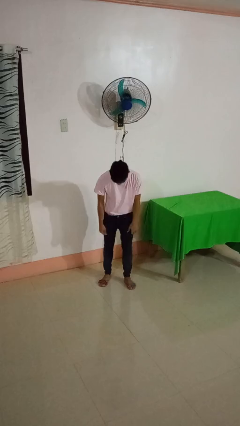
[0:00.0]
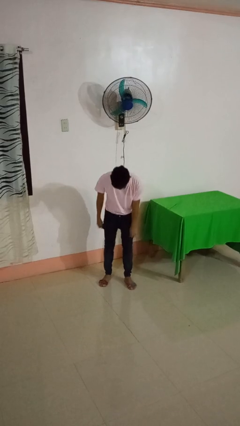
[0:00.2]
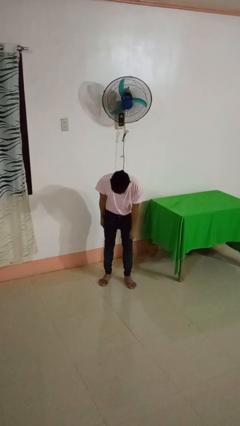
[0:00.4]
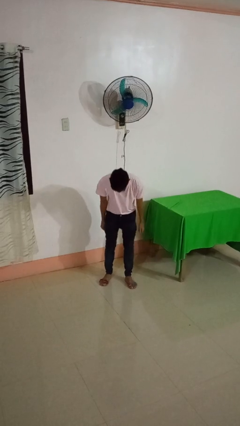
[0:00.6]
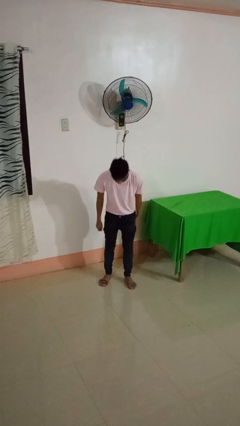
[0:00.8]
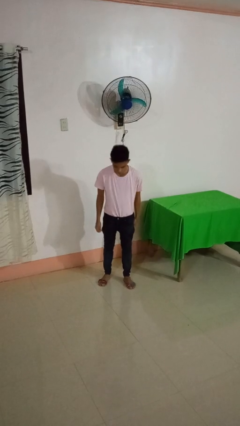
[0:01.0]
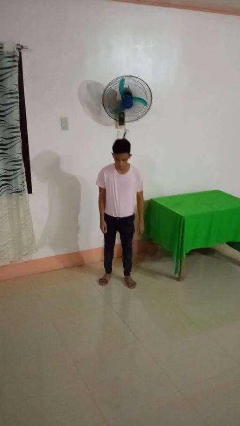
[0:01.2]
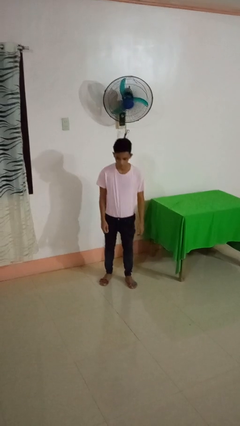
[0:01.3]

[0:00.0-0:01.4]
person hikes up pants

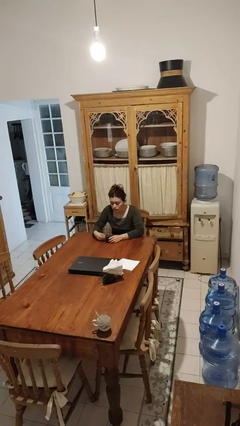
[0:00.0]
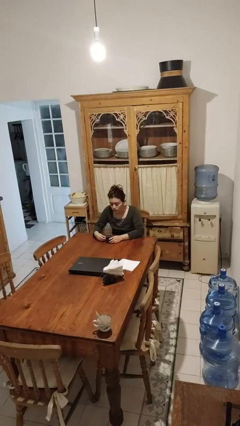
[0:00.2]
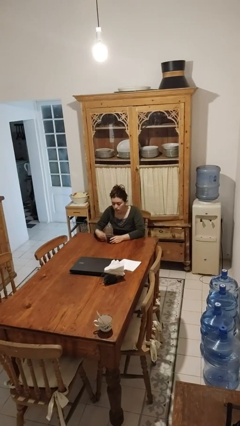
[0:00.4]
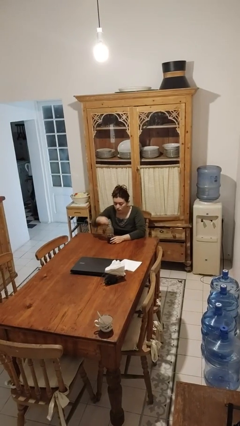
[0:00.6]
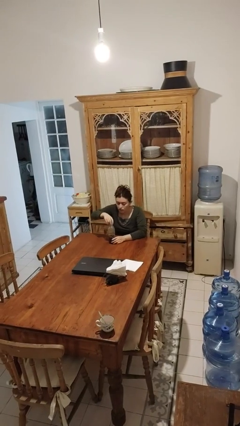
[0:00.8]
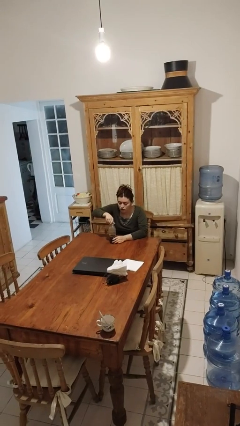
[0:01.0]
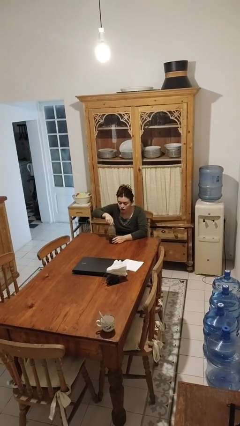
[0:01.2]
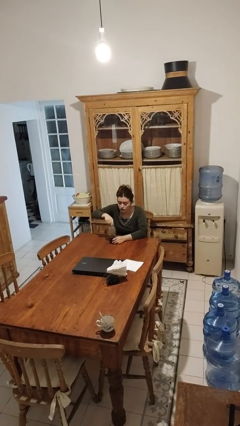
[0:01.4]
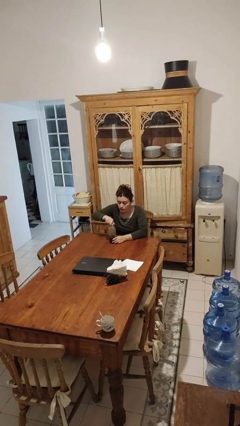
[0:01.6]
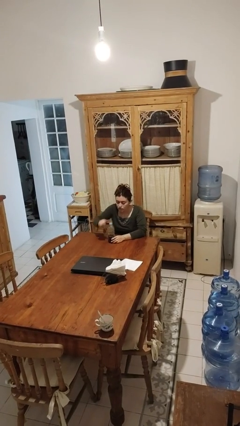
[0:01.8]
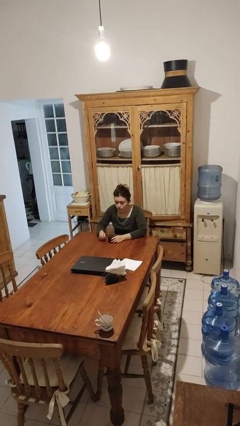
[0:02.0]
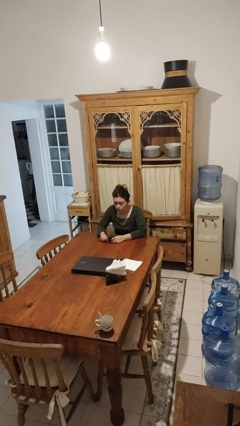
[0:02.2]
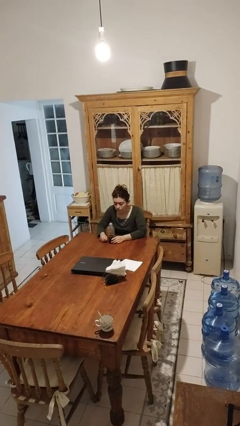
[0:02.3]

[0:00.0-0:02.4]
person screws lid to bottle

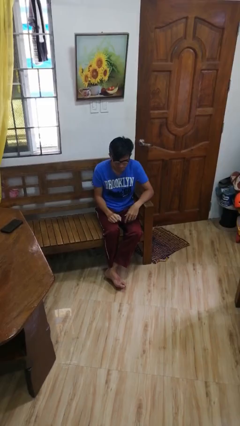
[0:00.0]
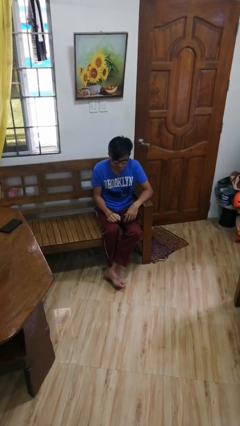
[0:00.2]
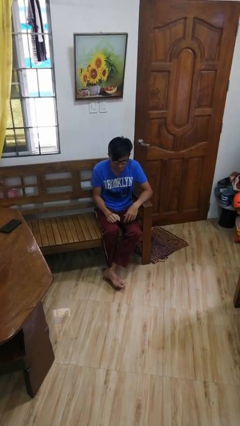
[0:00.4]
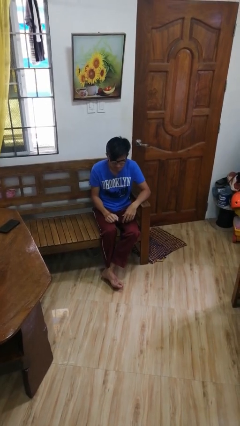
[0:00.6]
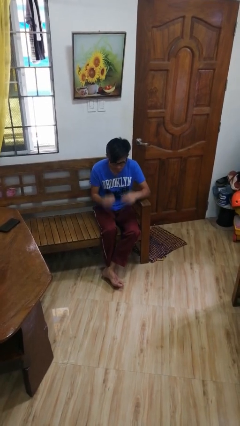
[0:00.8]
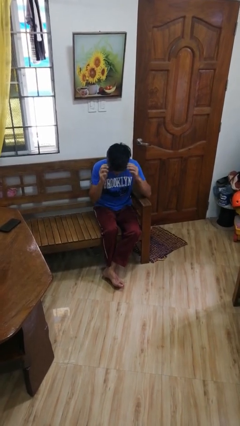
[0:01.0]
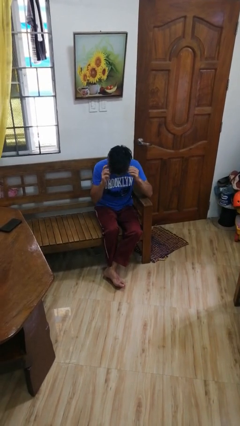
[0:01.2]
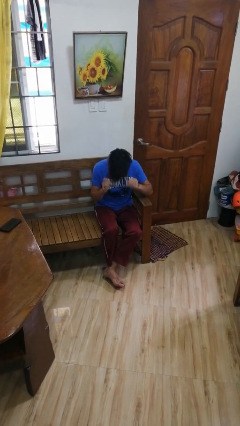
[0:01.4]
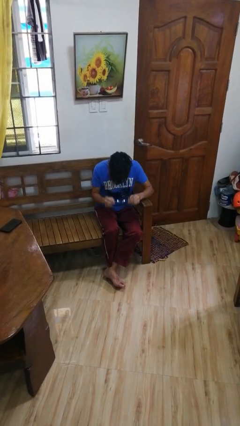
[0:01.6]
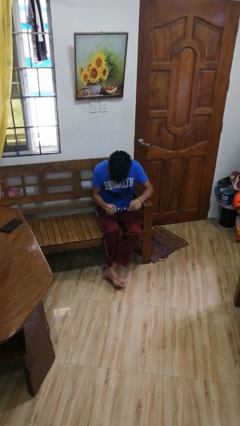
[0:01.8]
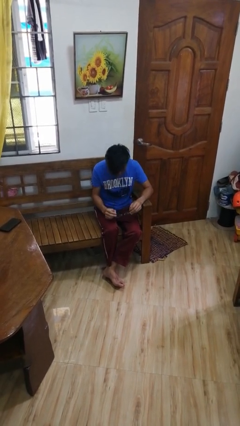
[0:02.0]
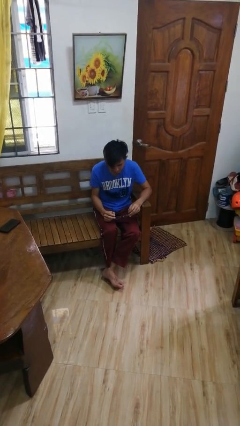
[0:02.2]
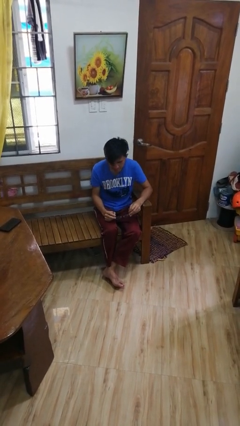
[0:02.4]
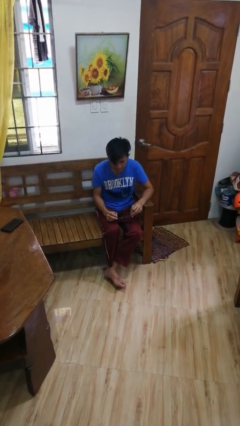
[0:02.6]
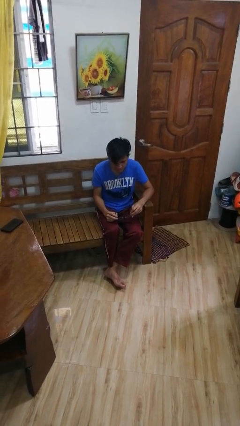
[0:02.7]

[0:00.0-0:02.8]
person takes off glasses

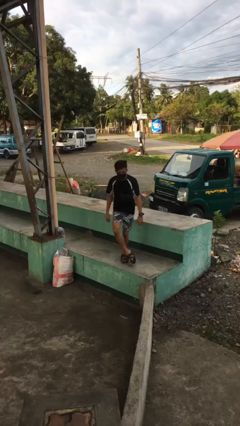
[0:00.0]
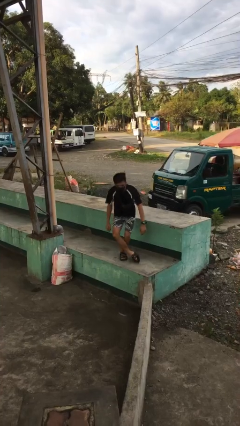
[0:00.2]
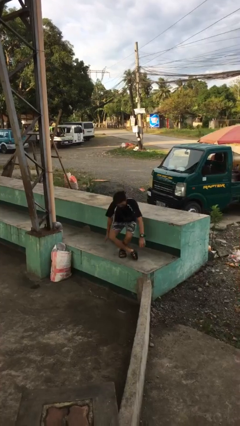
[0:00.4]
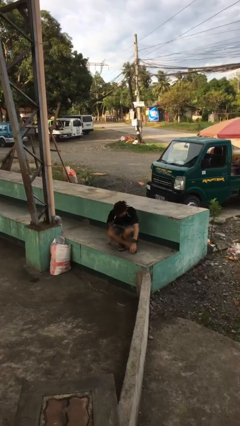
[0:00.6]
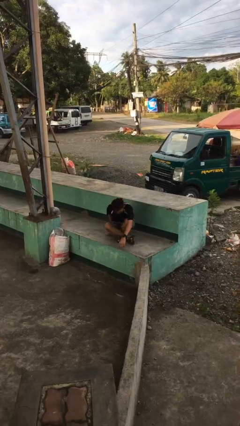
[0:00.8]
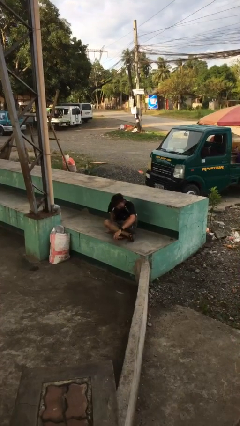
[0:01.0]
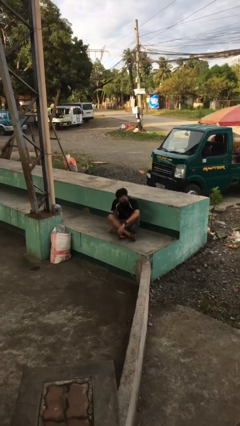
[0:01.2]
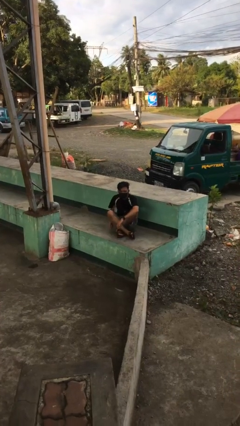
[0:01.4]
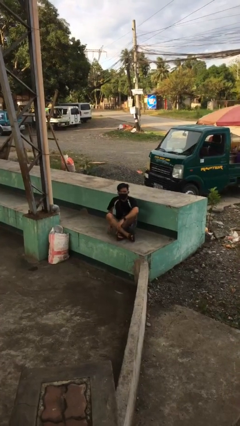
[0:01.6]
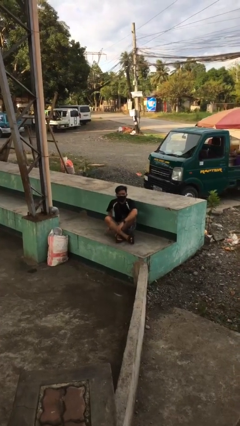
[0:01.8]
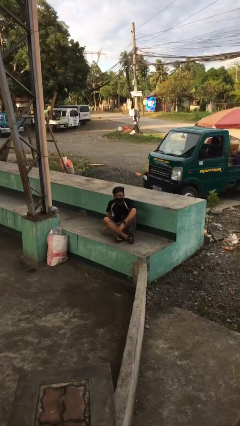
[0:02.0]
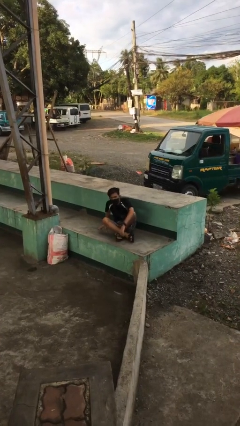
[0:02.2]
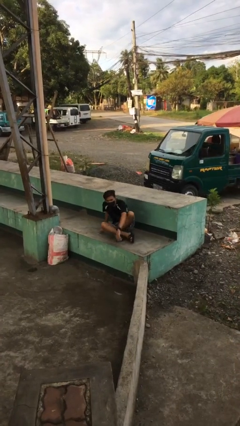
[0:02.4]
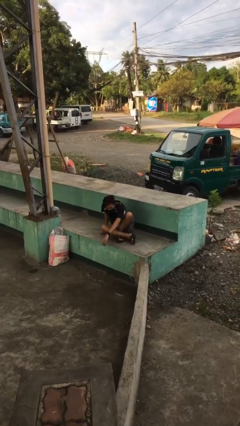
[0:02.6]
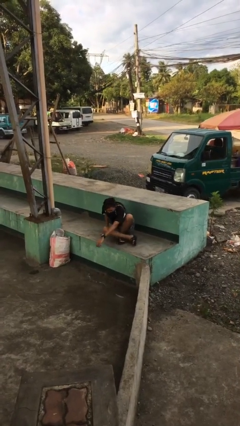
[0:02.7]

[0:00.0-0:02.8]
person sits crisscross

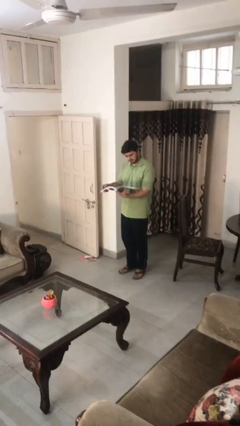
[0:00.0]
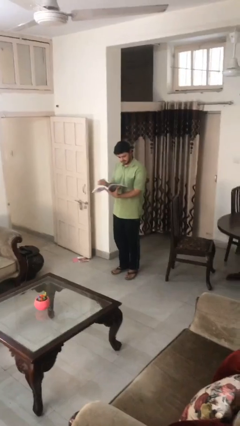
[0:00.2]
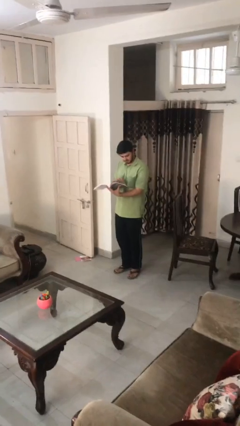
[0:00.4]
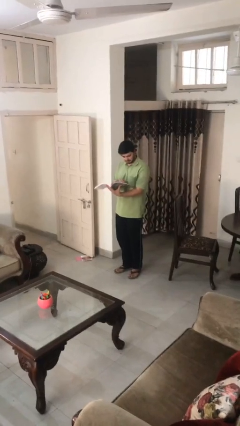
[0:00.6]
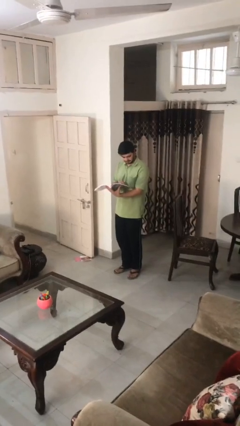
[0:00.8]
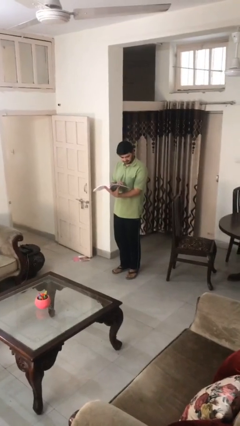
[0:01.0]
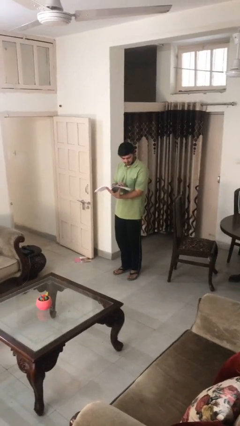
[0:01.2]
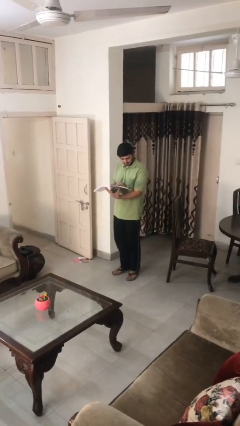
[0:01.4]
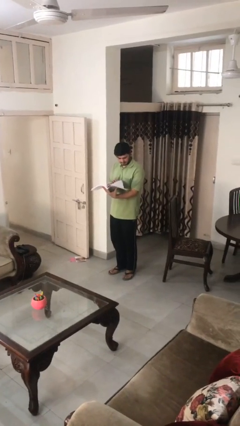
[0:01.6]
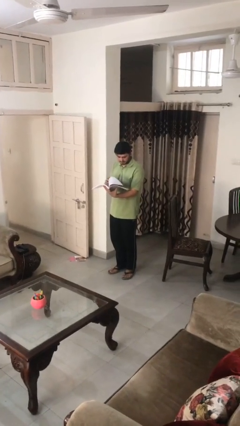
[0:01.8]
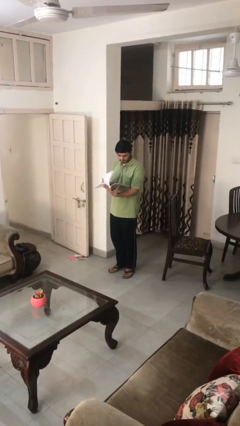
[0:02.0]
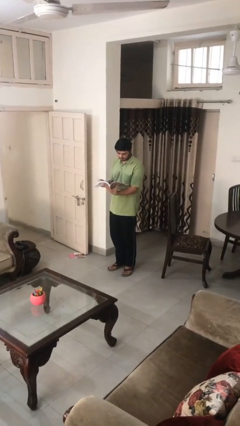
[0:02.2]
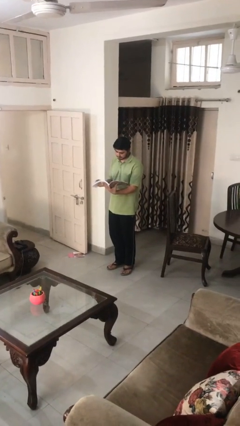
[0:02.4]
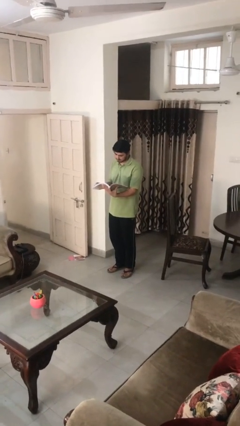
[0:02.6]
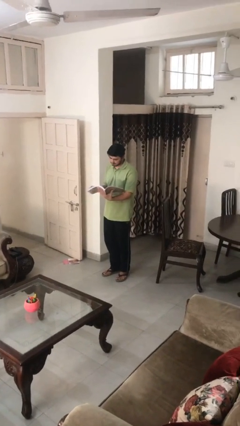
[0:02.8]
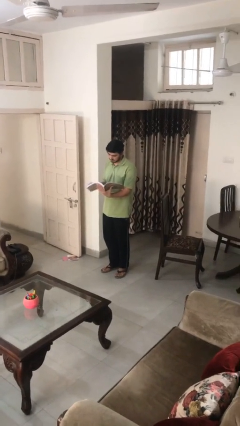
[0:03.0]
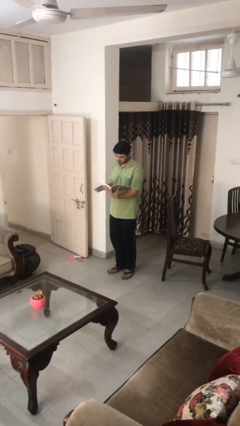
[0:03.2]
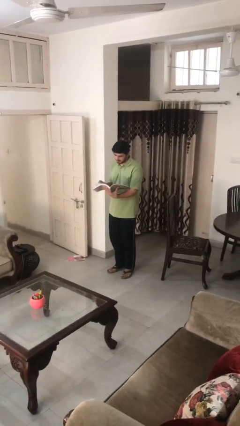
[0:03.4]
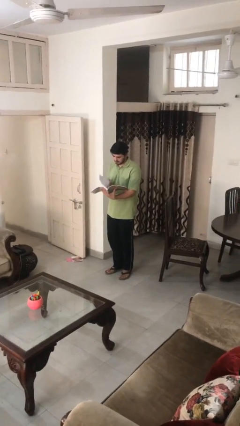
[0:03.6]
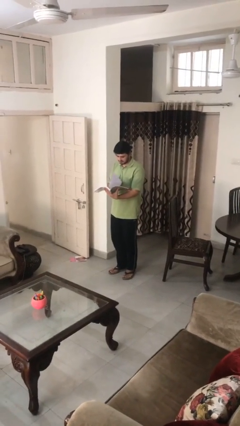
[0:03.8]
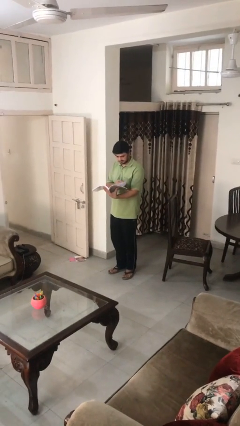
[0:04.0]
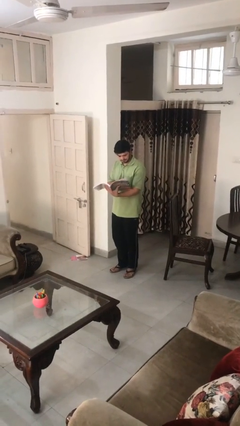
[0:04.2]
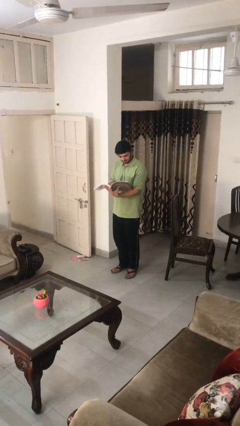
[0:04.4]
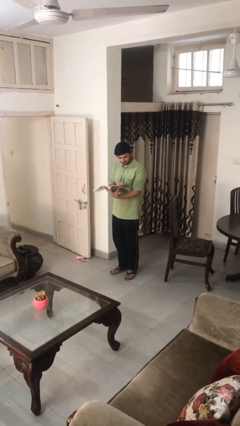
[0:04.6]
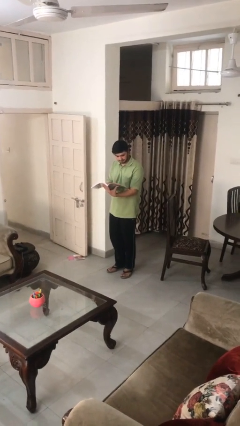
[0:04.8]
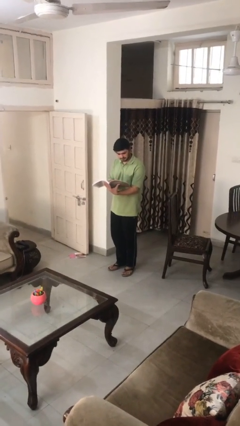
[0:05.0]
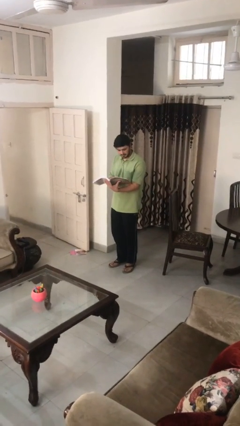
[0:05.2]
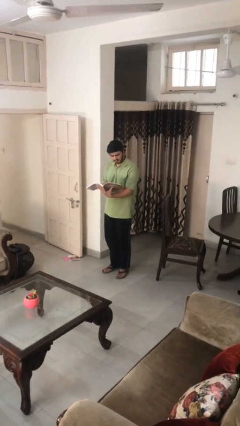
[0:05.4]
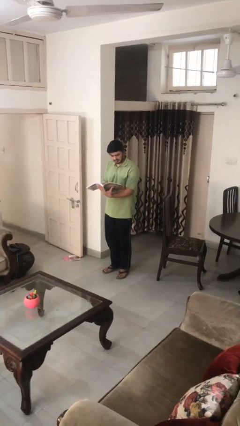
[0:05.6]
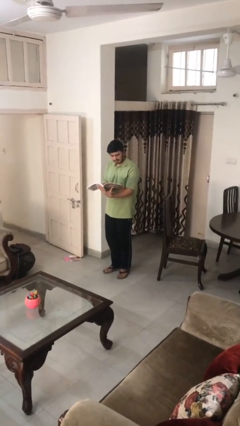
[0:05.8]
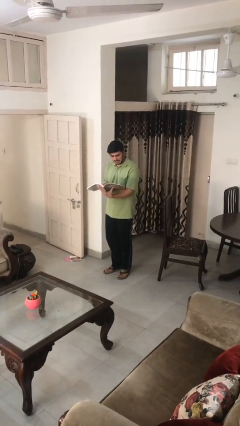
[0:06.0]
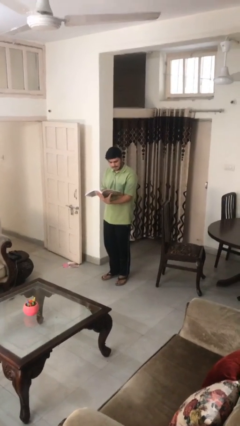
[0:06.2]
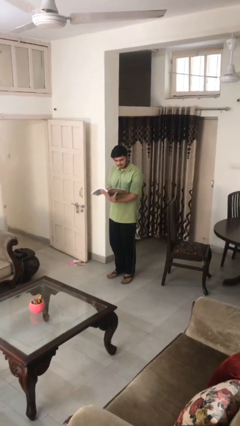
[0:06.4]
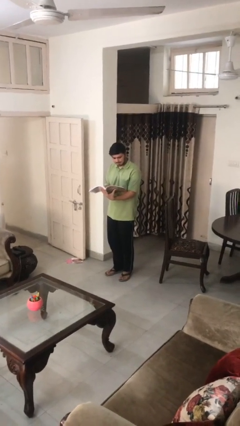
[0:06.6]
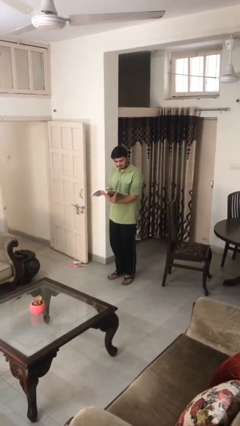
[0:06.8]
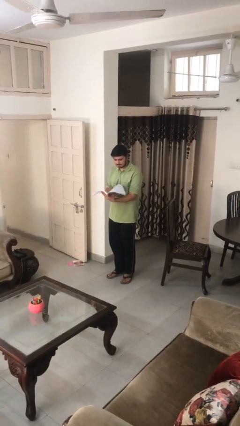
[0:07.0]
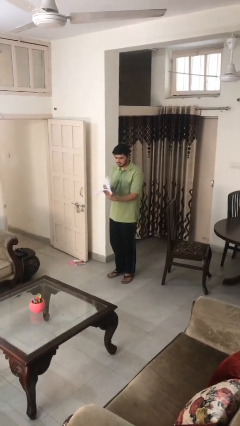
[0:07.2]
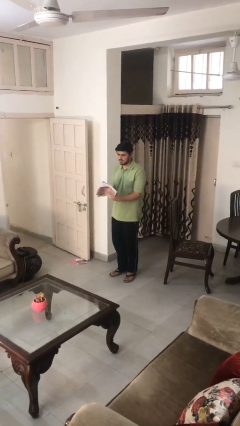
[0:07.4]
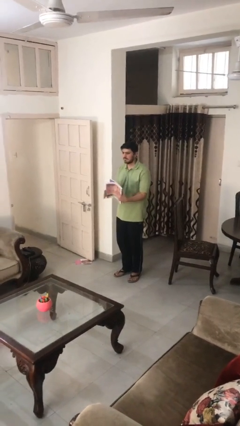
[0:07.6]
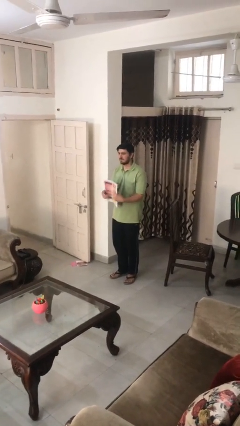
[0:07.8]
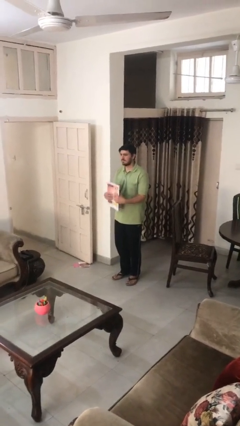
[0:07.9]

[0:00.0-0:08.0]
person reads document

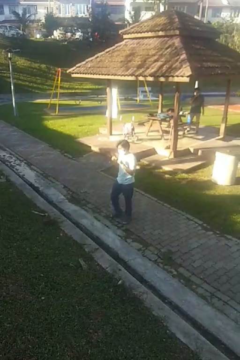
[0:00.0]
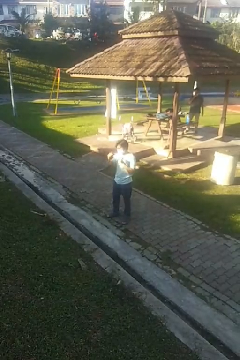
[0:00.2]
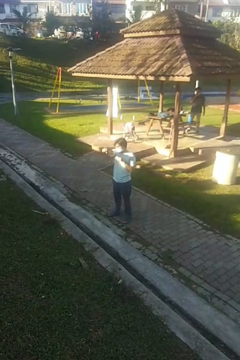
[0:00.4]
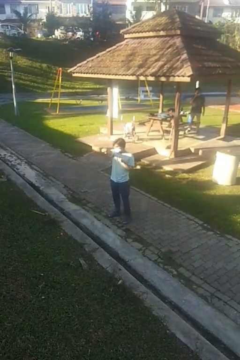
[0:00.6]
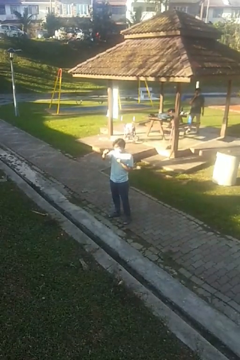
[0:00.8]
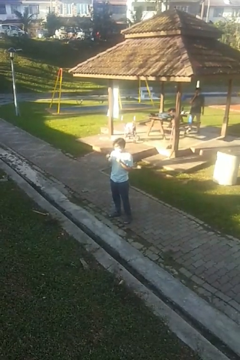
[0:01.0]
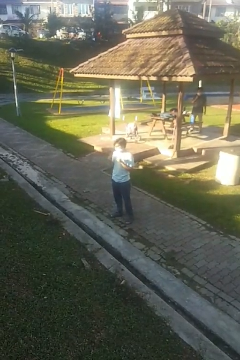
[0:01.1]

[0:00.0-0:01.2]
person punches
